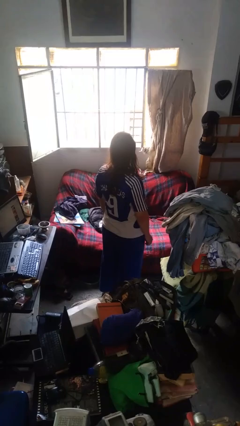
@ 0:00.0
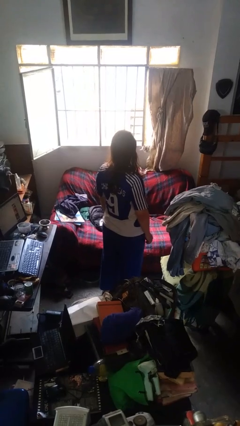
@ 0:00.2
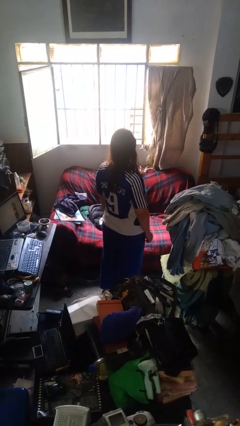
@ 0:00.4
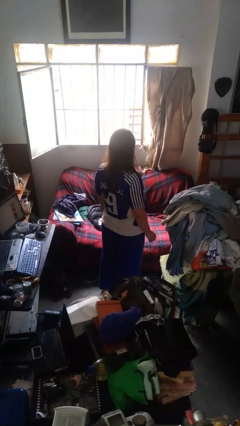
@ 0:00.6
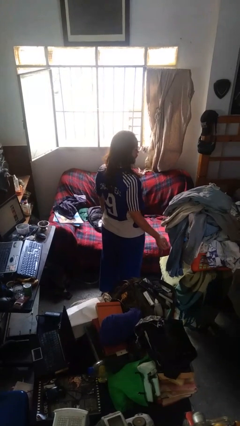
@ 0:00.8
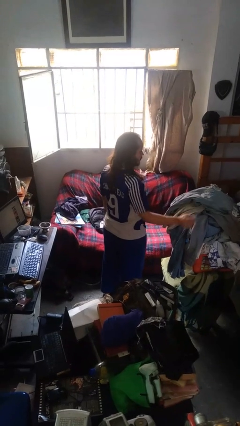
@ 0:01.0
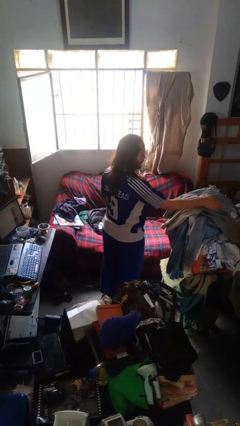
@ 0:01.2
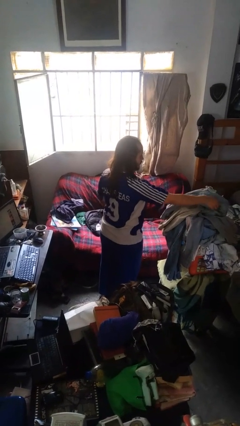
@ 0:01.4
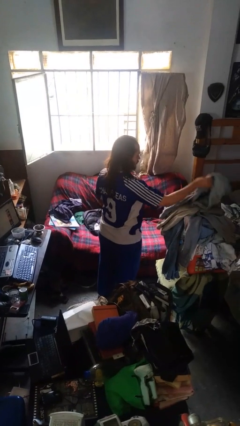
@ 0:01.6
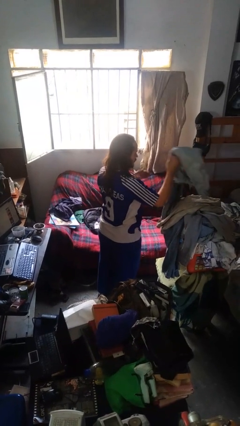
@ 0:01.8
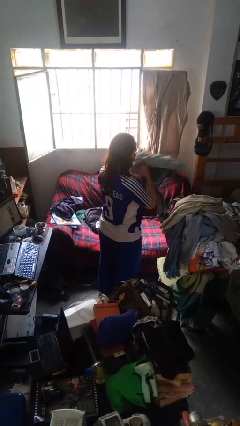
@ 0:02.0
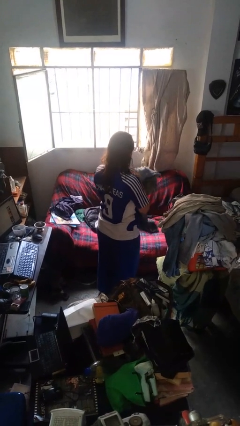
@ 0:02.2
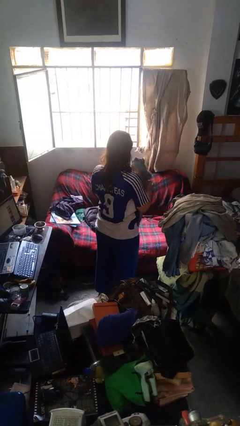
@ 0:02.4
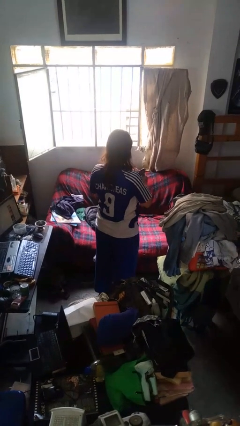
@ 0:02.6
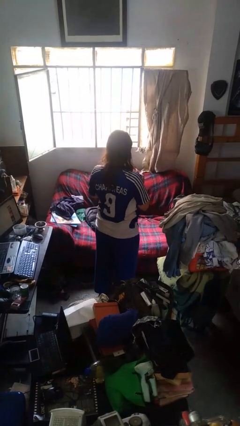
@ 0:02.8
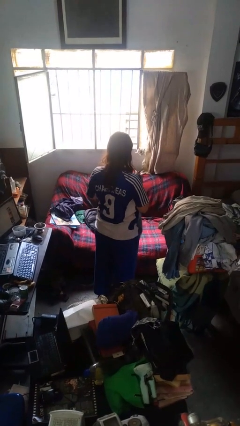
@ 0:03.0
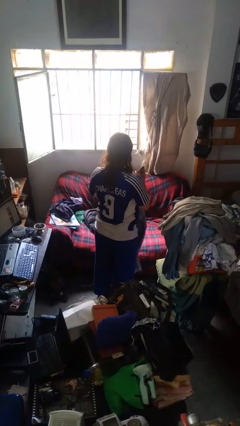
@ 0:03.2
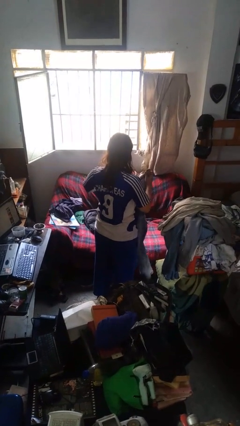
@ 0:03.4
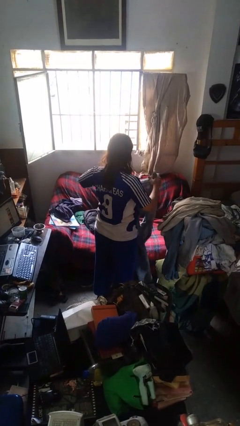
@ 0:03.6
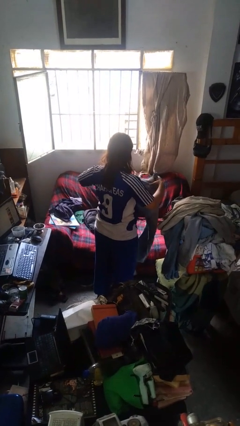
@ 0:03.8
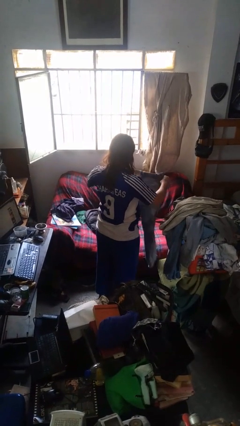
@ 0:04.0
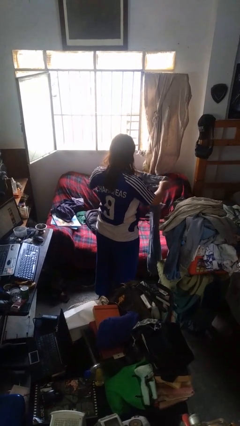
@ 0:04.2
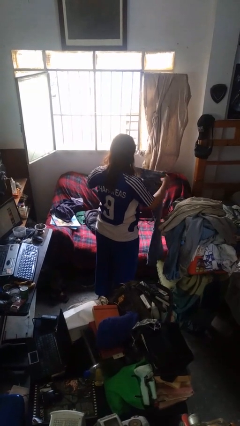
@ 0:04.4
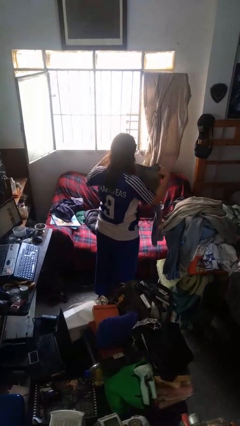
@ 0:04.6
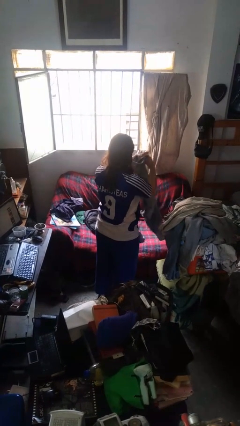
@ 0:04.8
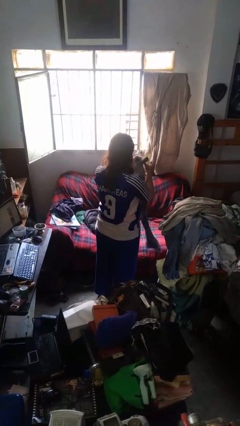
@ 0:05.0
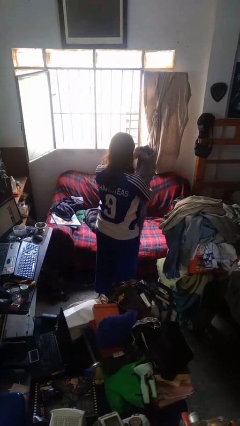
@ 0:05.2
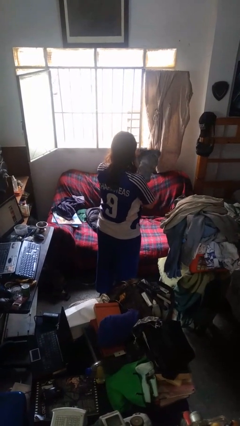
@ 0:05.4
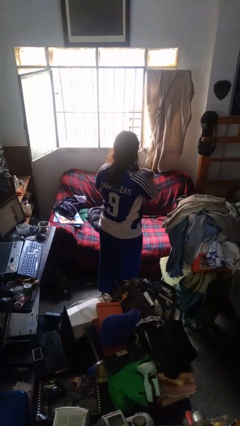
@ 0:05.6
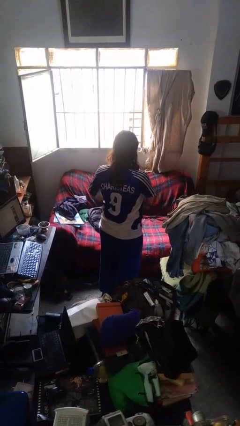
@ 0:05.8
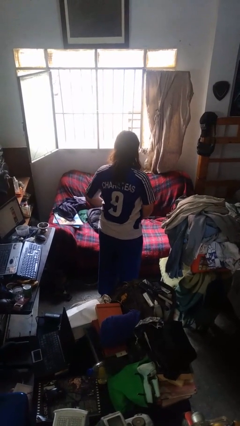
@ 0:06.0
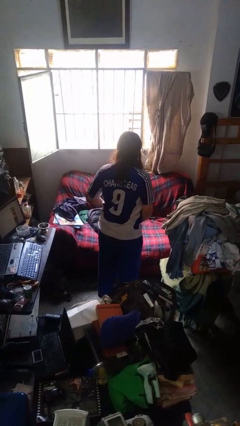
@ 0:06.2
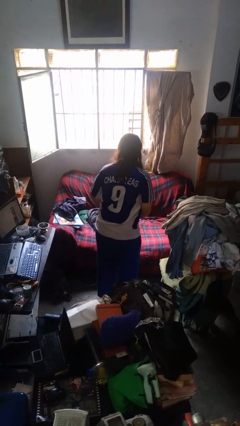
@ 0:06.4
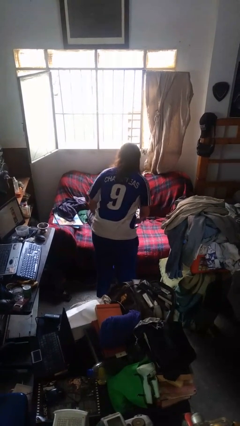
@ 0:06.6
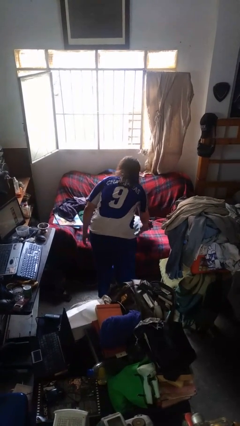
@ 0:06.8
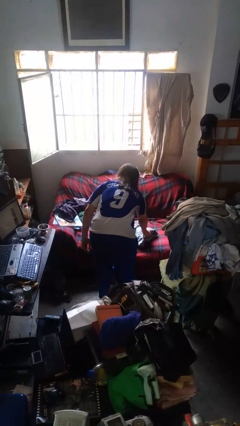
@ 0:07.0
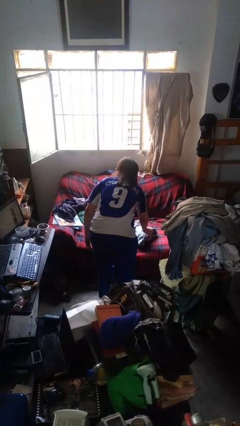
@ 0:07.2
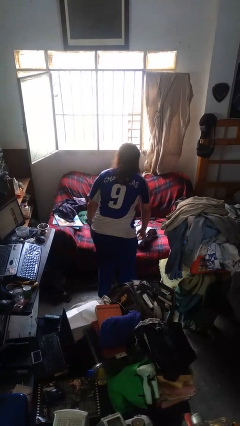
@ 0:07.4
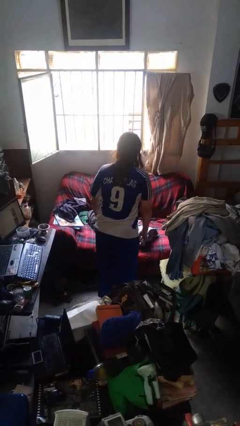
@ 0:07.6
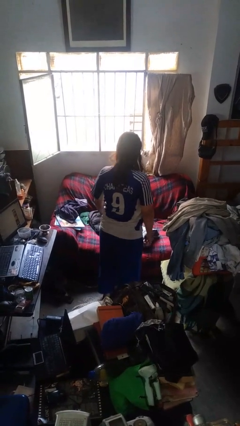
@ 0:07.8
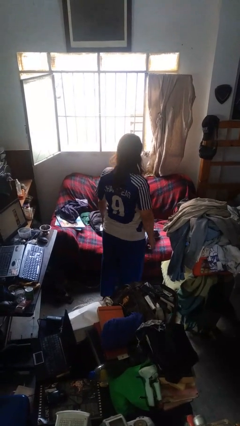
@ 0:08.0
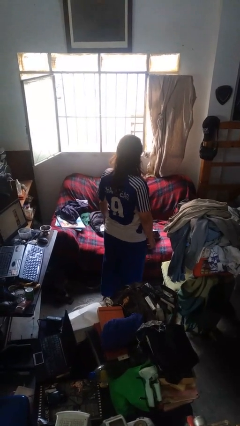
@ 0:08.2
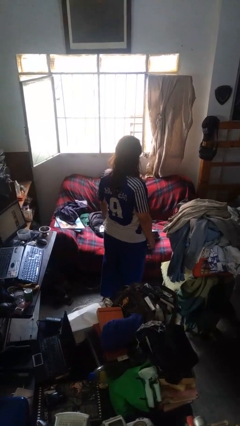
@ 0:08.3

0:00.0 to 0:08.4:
person folds pants

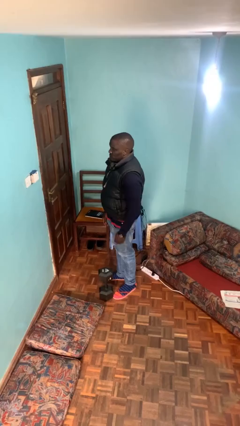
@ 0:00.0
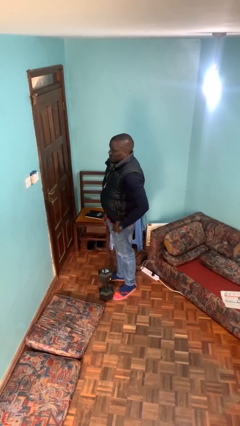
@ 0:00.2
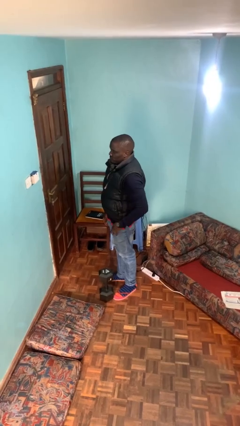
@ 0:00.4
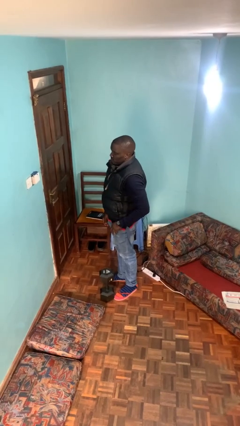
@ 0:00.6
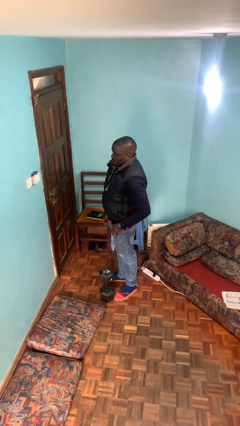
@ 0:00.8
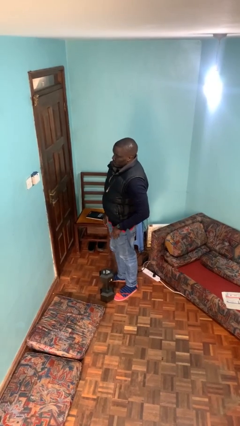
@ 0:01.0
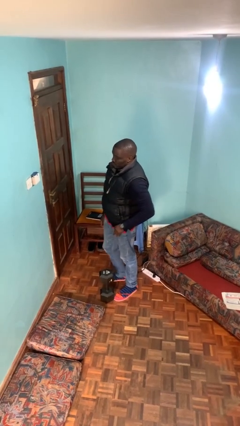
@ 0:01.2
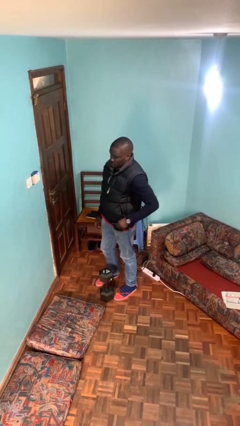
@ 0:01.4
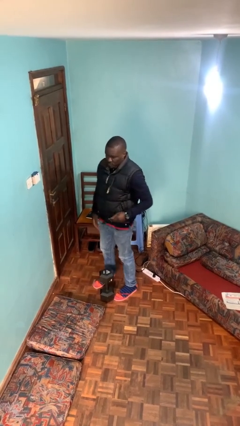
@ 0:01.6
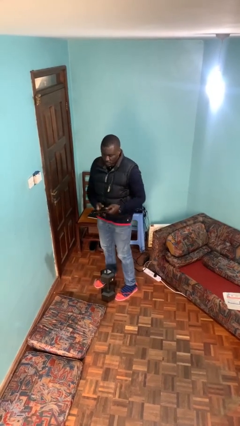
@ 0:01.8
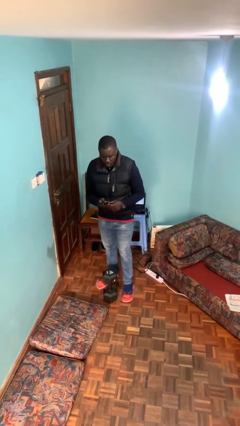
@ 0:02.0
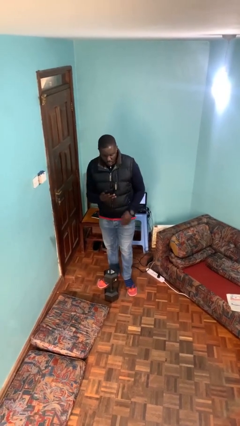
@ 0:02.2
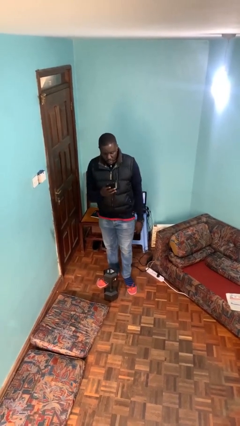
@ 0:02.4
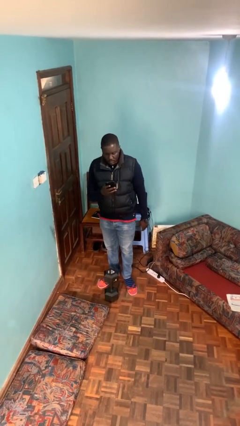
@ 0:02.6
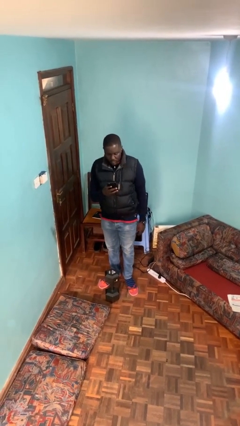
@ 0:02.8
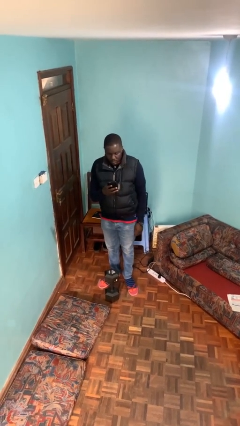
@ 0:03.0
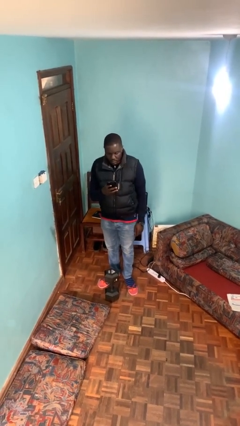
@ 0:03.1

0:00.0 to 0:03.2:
person takes phone from pocket

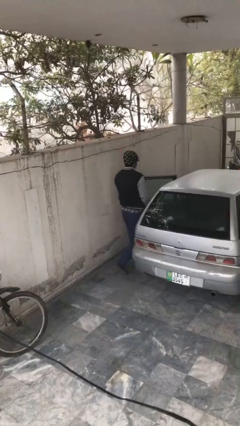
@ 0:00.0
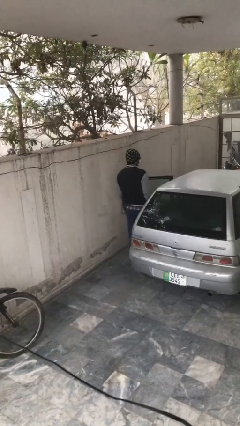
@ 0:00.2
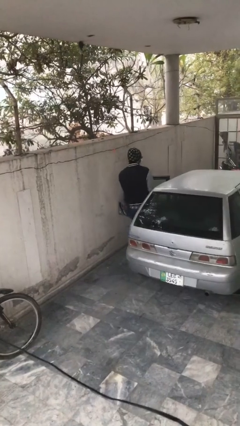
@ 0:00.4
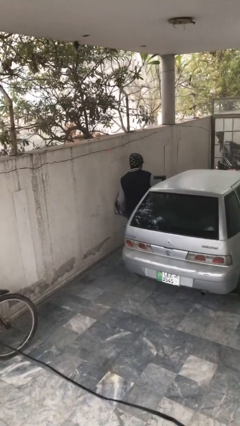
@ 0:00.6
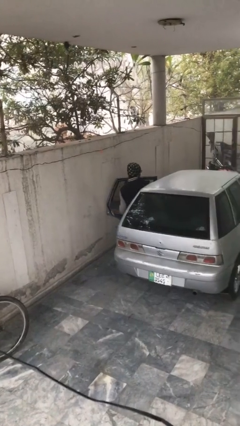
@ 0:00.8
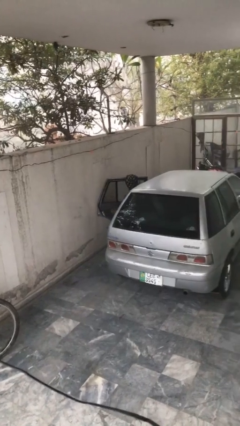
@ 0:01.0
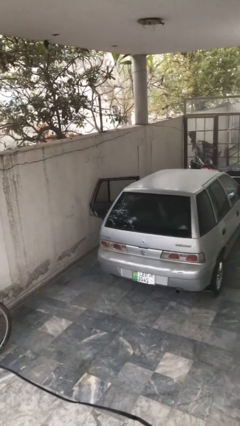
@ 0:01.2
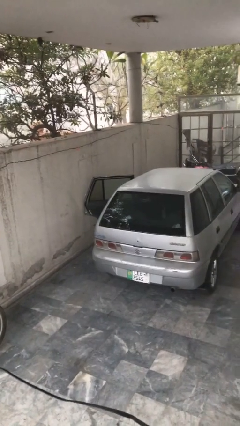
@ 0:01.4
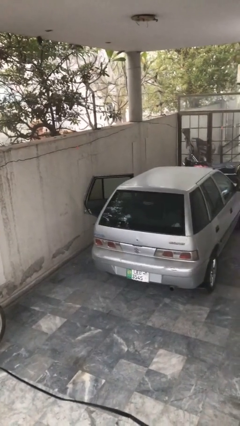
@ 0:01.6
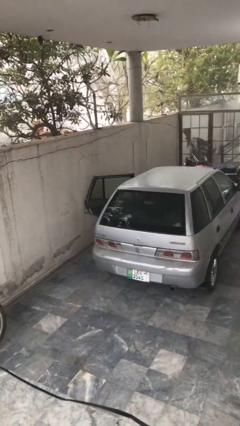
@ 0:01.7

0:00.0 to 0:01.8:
person enters car

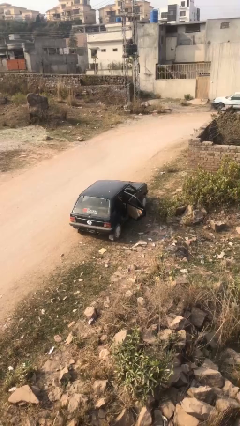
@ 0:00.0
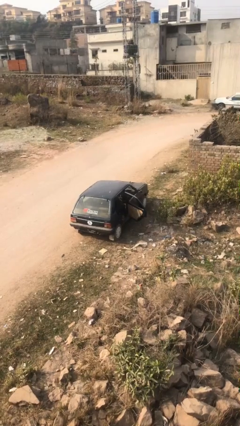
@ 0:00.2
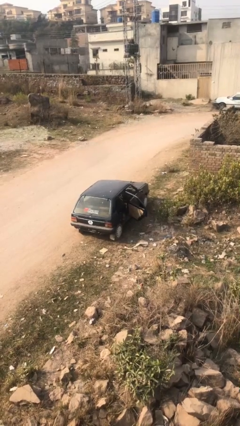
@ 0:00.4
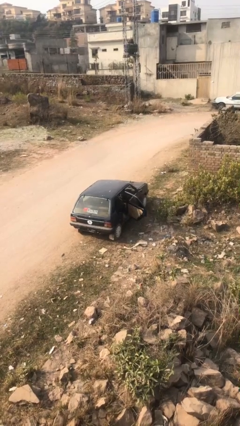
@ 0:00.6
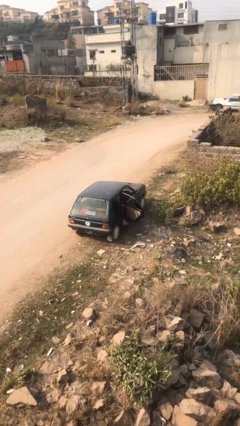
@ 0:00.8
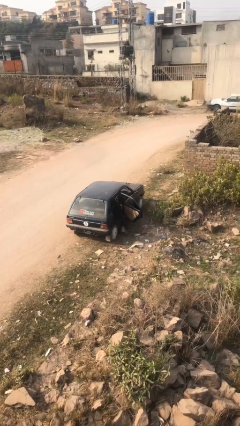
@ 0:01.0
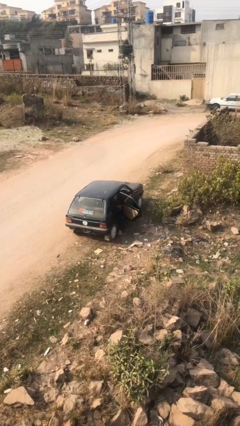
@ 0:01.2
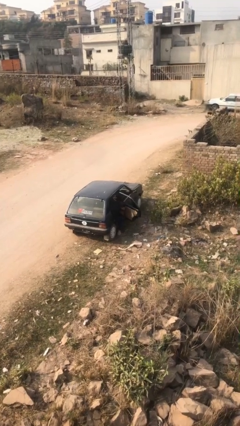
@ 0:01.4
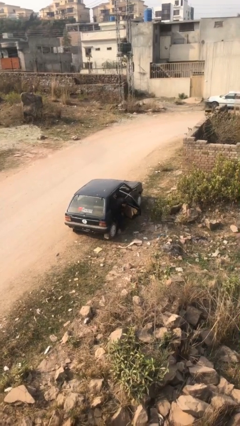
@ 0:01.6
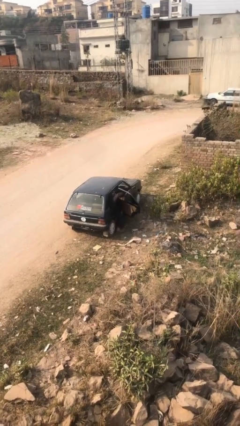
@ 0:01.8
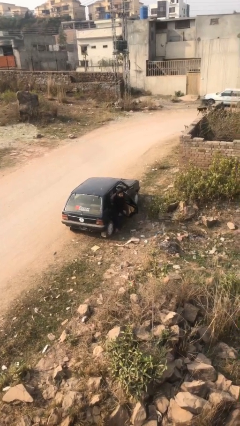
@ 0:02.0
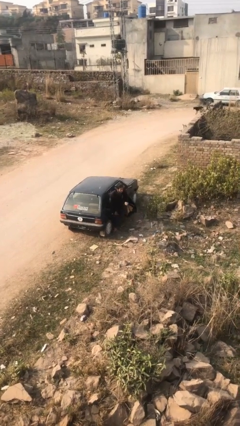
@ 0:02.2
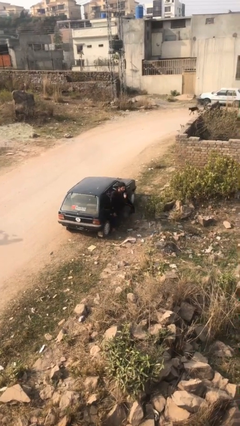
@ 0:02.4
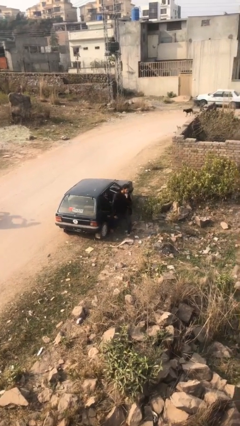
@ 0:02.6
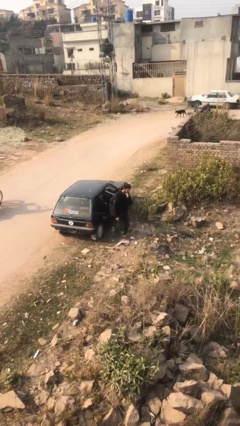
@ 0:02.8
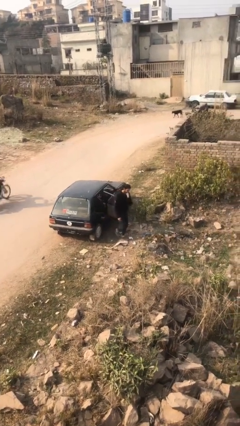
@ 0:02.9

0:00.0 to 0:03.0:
person exits car

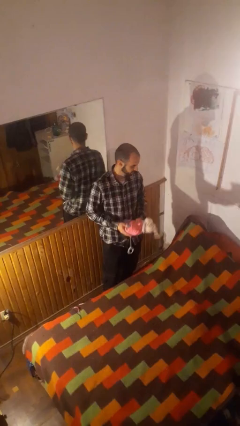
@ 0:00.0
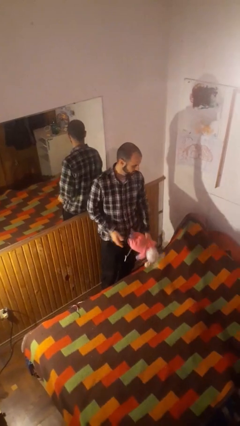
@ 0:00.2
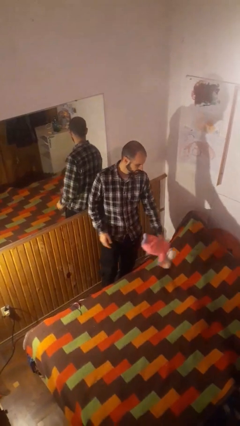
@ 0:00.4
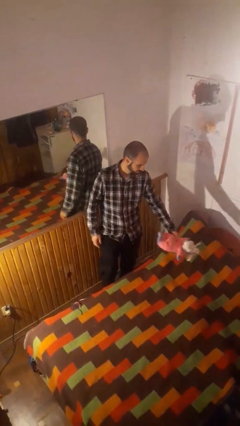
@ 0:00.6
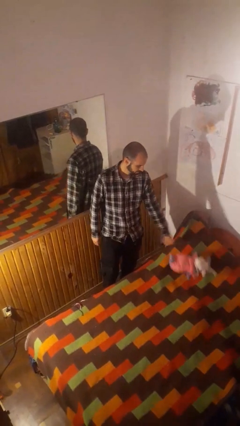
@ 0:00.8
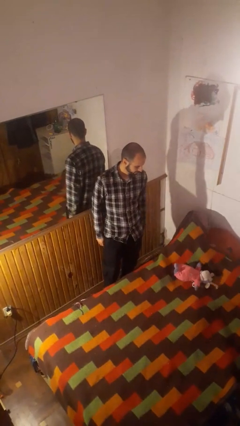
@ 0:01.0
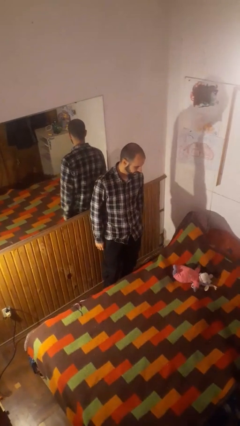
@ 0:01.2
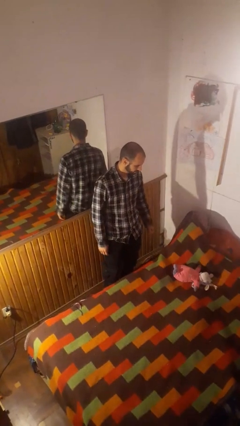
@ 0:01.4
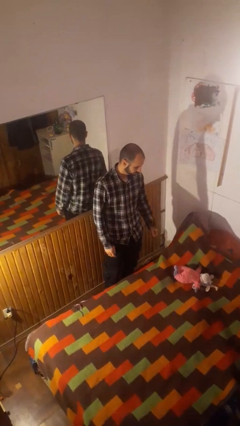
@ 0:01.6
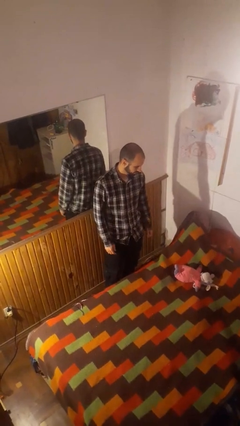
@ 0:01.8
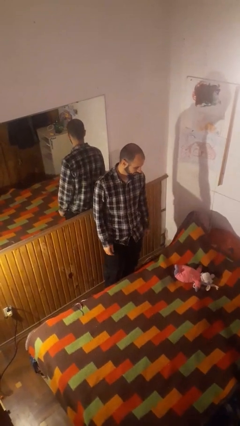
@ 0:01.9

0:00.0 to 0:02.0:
person puts down object on bed
